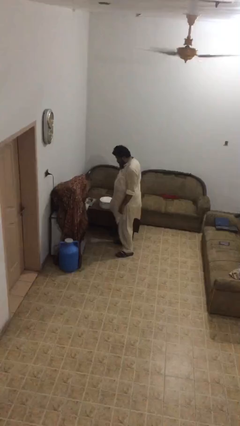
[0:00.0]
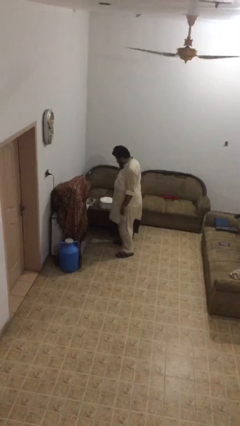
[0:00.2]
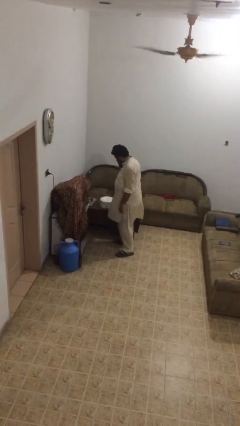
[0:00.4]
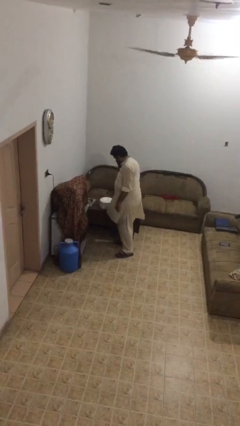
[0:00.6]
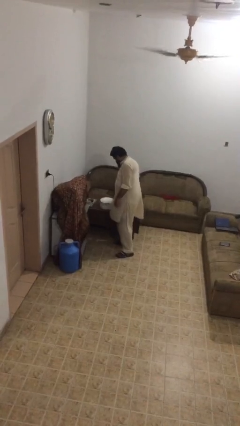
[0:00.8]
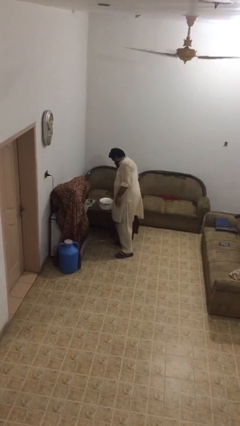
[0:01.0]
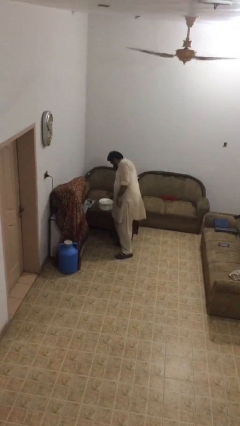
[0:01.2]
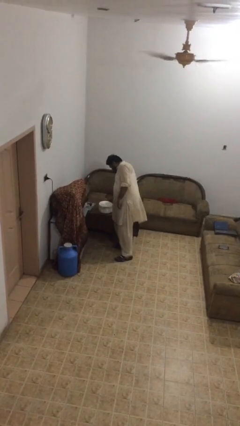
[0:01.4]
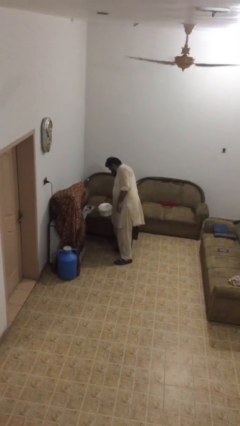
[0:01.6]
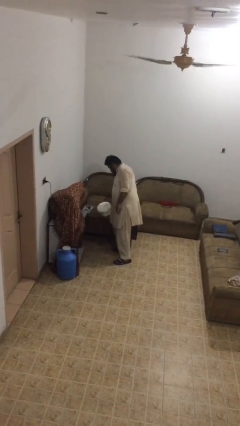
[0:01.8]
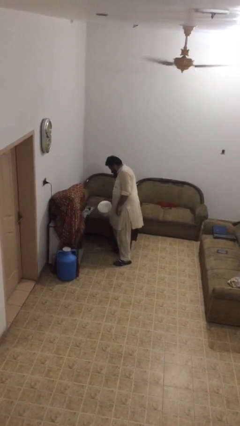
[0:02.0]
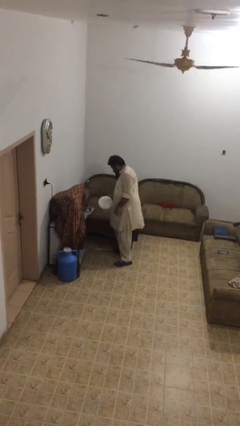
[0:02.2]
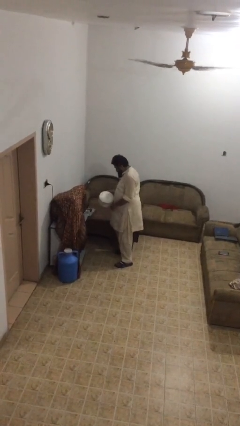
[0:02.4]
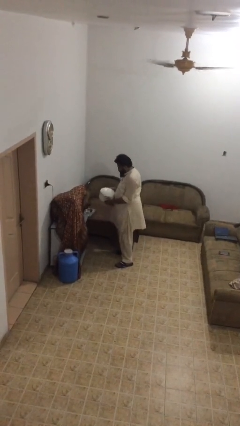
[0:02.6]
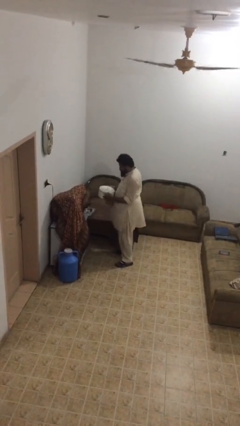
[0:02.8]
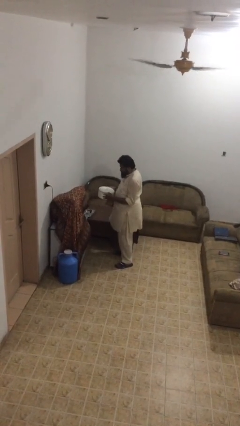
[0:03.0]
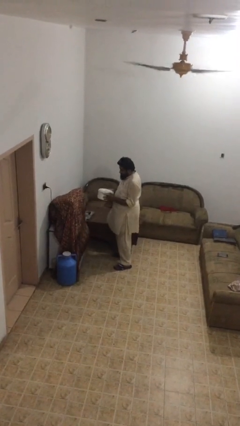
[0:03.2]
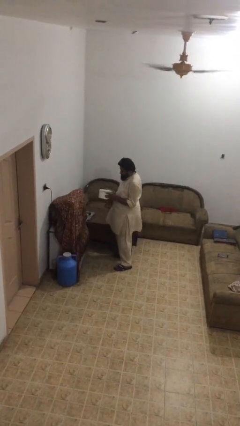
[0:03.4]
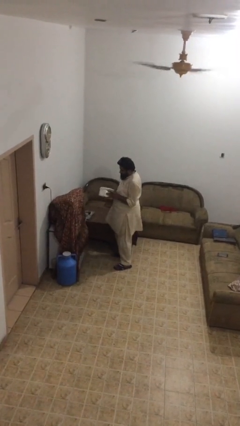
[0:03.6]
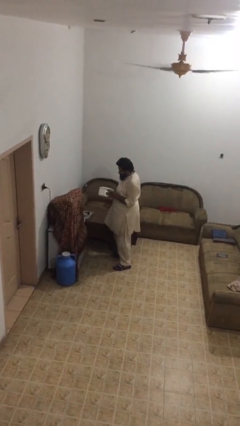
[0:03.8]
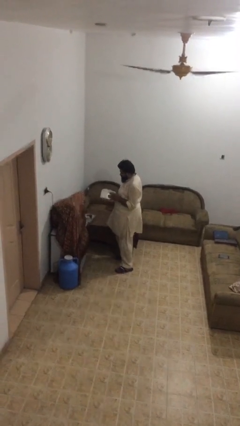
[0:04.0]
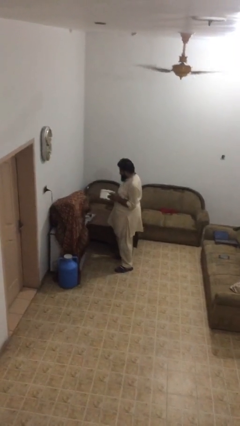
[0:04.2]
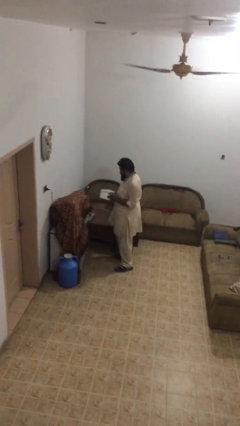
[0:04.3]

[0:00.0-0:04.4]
person picks up object from table

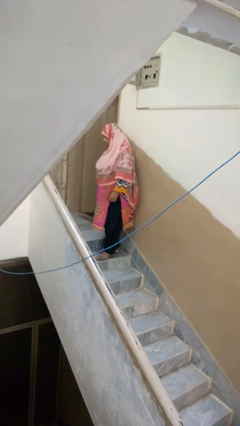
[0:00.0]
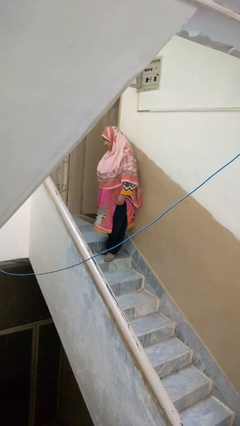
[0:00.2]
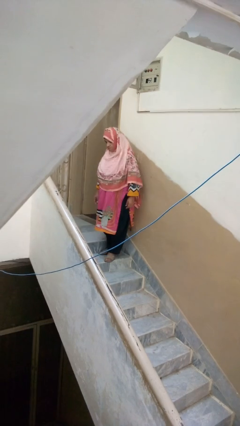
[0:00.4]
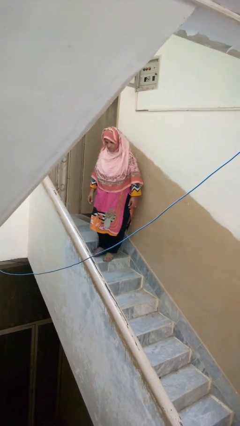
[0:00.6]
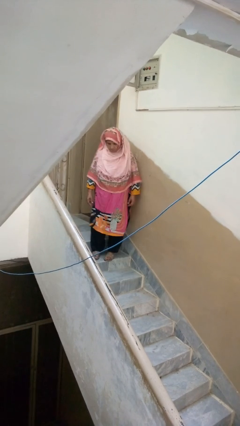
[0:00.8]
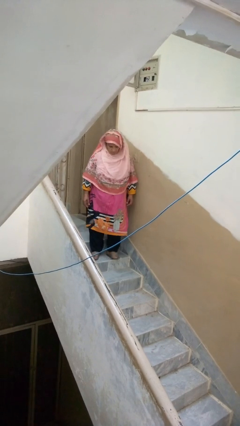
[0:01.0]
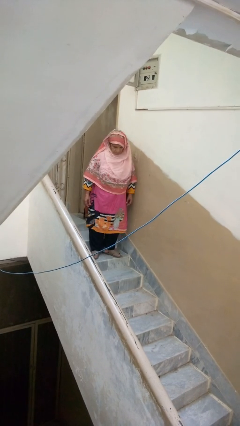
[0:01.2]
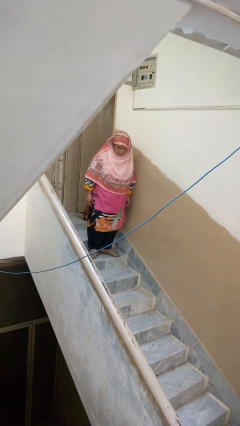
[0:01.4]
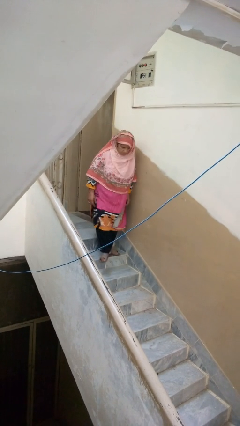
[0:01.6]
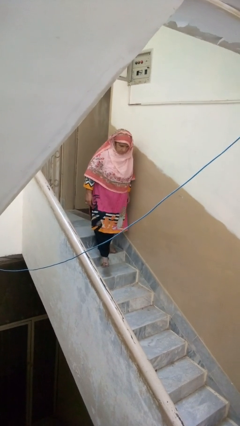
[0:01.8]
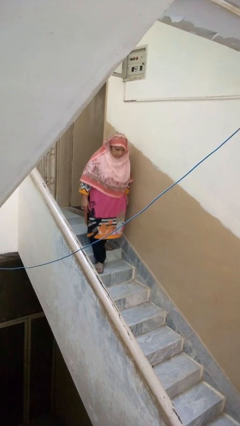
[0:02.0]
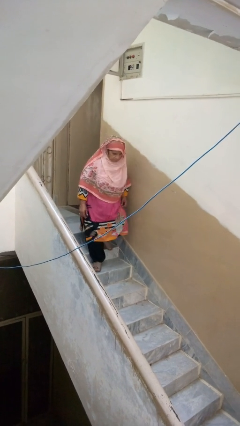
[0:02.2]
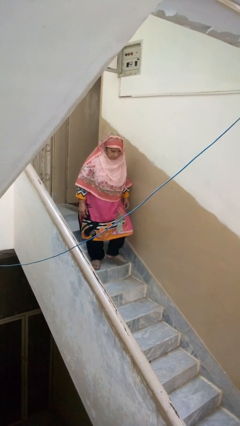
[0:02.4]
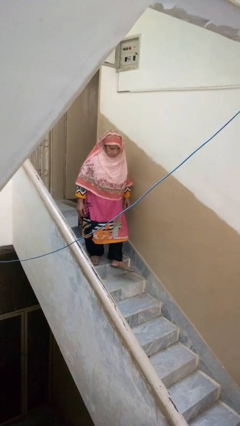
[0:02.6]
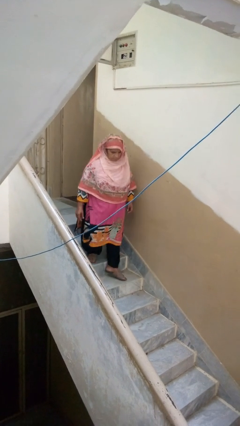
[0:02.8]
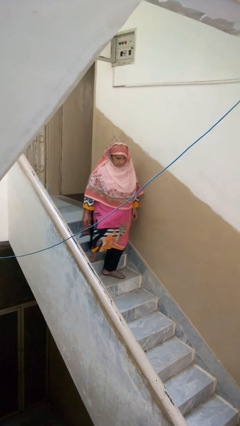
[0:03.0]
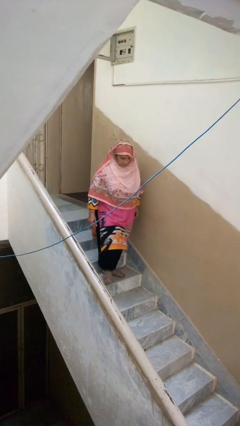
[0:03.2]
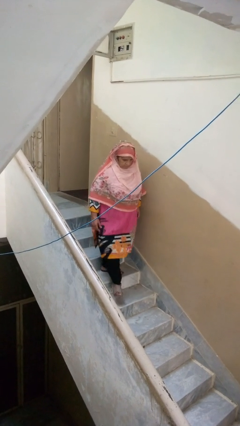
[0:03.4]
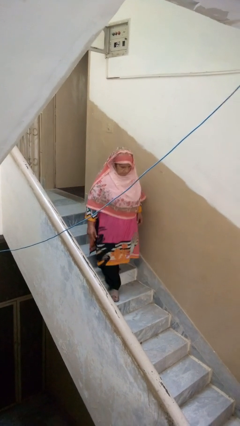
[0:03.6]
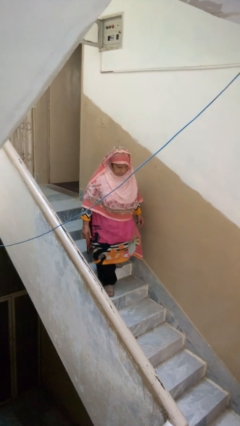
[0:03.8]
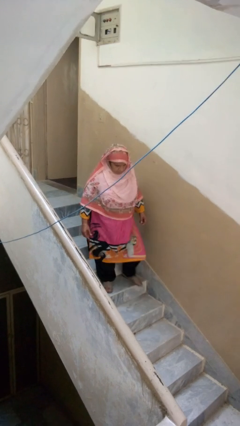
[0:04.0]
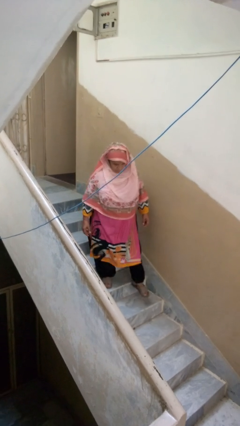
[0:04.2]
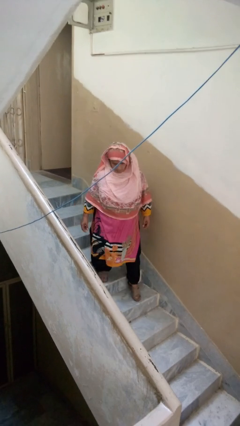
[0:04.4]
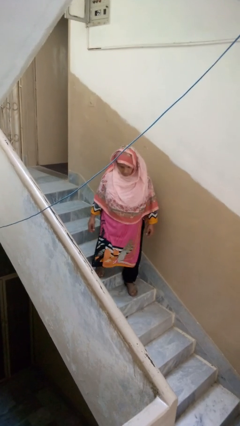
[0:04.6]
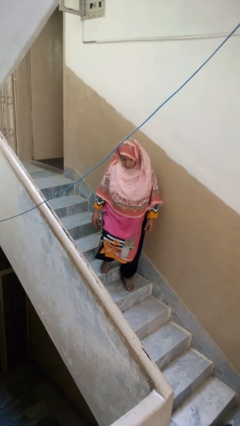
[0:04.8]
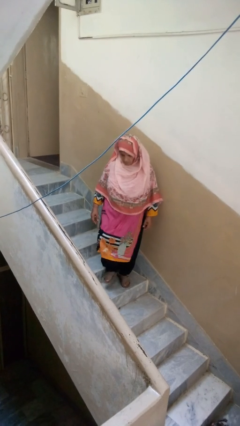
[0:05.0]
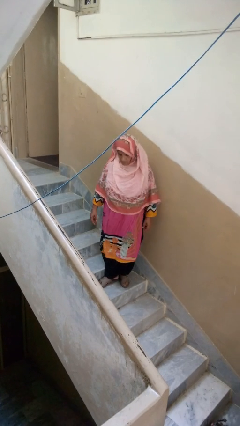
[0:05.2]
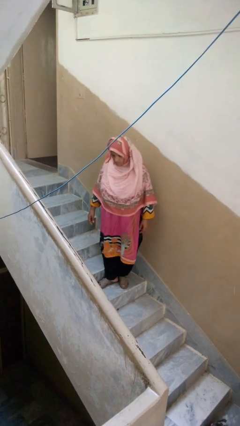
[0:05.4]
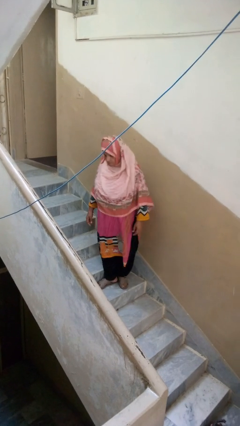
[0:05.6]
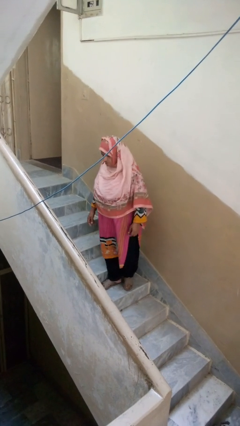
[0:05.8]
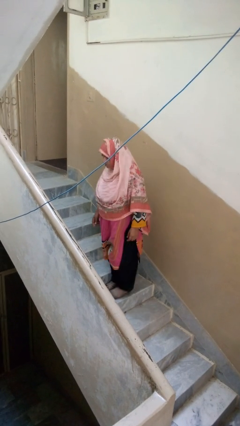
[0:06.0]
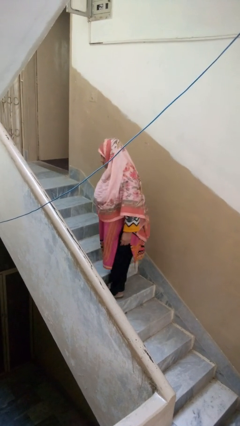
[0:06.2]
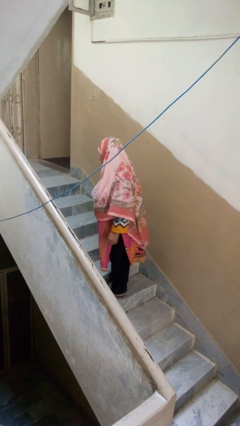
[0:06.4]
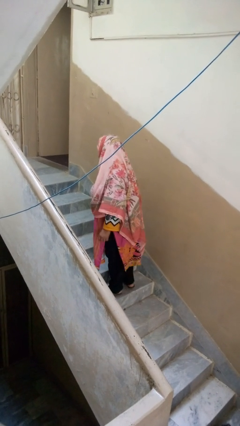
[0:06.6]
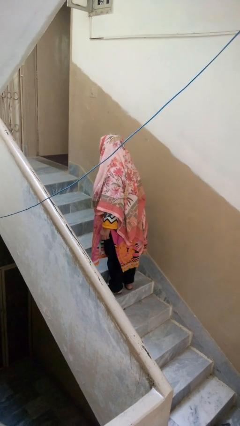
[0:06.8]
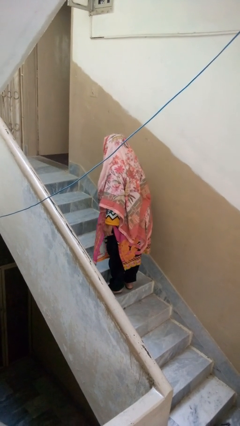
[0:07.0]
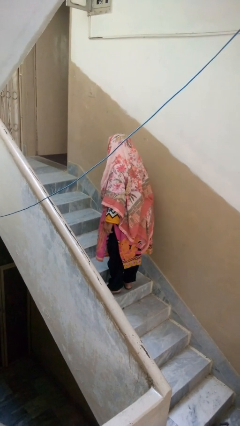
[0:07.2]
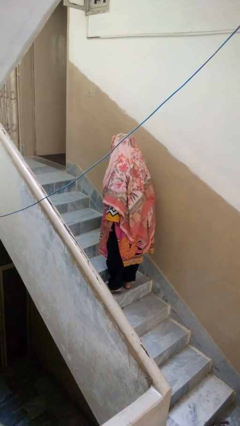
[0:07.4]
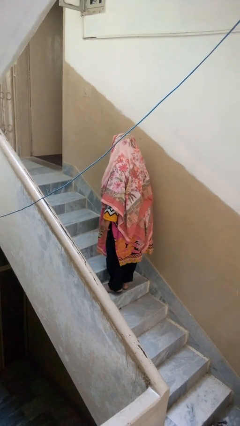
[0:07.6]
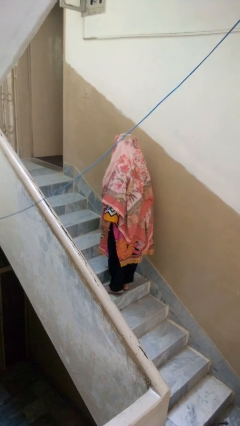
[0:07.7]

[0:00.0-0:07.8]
person climbs down stairs

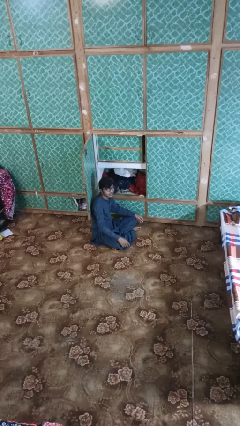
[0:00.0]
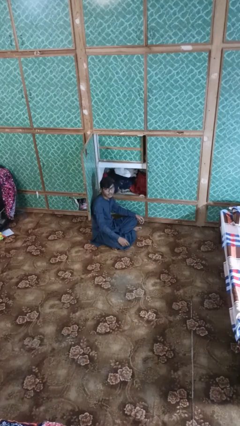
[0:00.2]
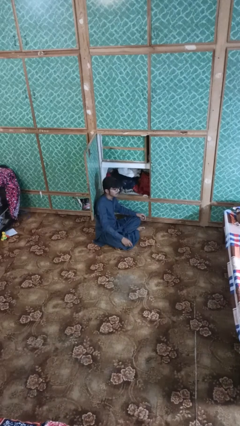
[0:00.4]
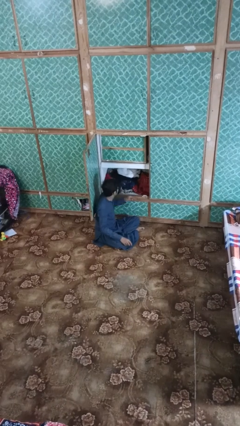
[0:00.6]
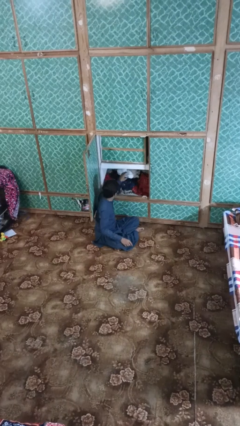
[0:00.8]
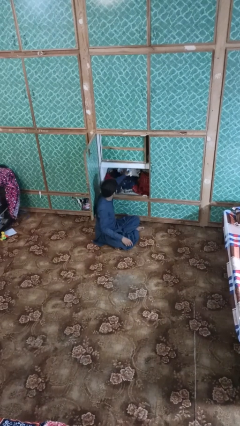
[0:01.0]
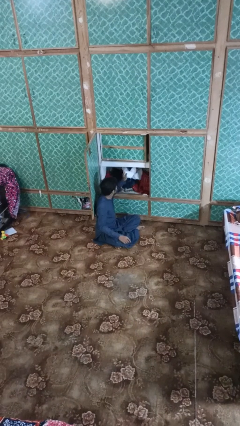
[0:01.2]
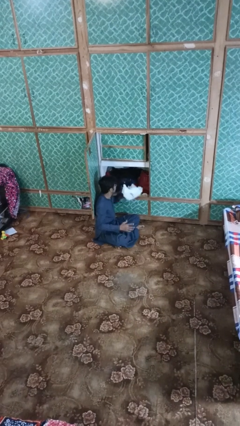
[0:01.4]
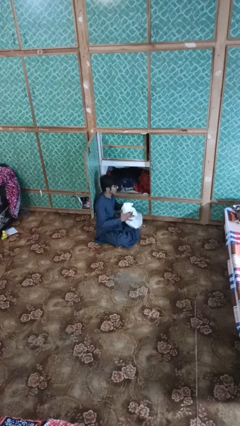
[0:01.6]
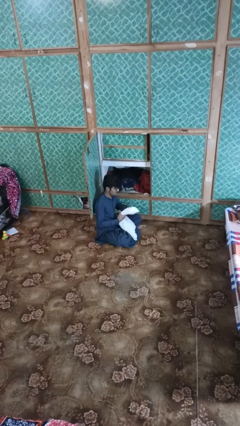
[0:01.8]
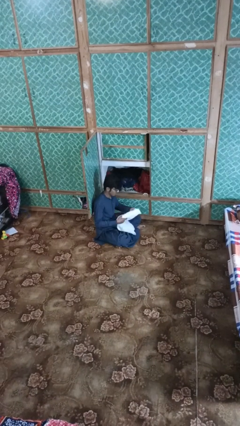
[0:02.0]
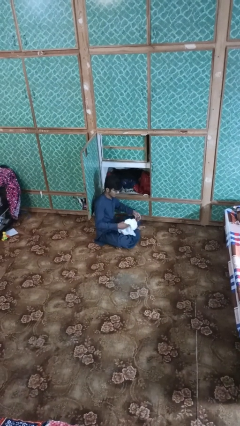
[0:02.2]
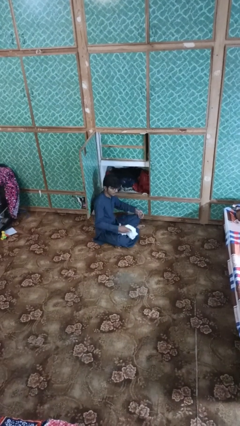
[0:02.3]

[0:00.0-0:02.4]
person takes clothes from dresser

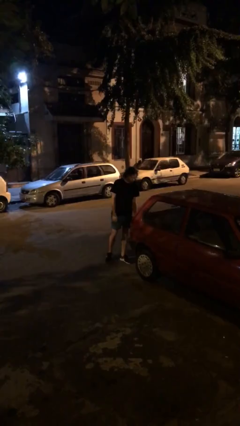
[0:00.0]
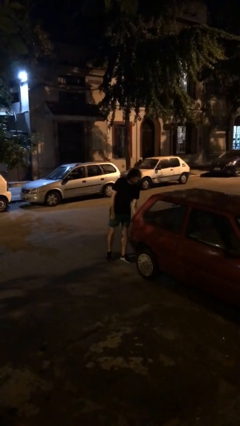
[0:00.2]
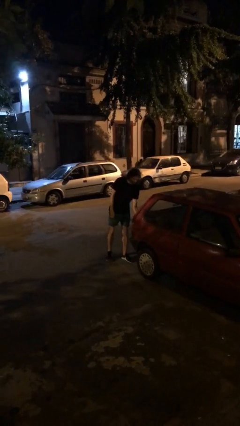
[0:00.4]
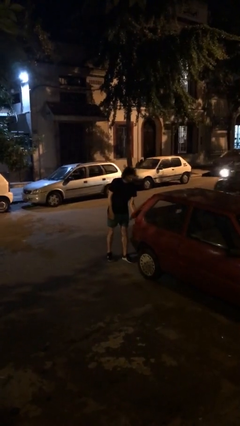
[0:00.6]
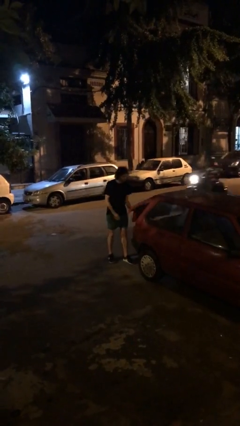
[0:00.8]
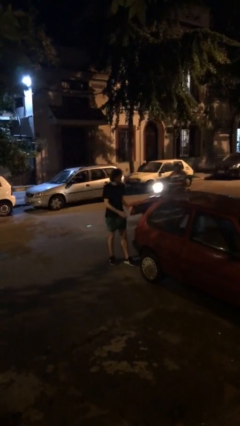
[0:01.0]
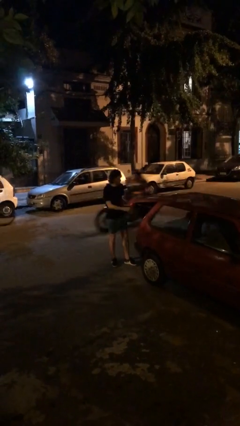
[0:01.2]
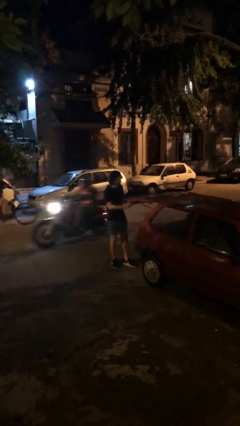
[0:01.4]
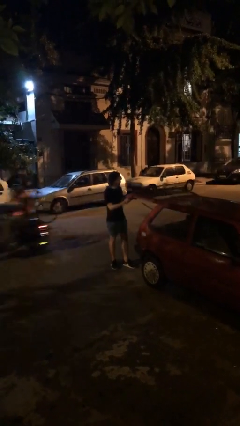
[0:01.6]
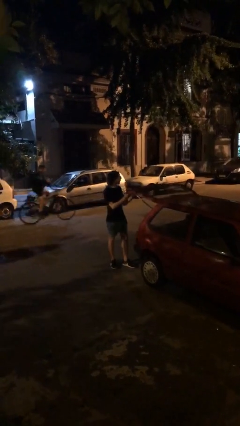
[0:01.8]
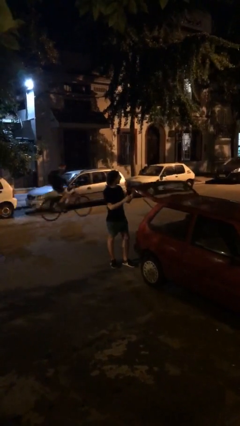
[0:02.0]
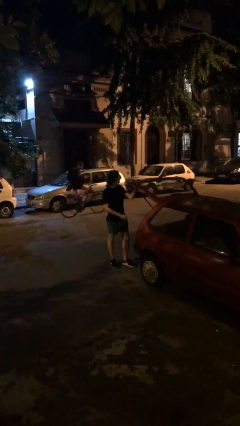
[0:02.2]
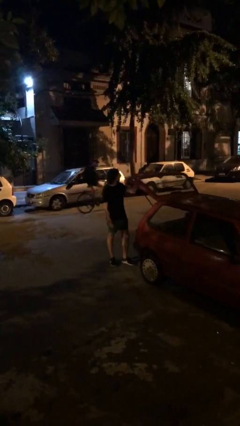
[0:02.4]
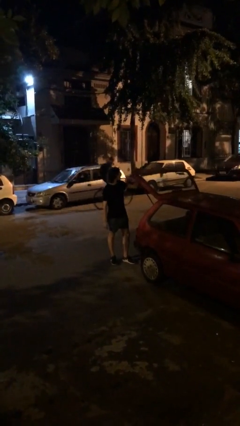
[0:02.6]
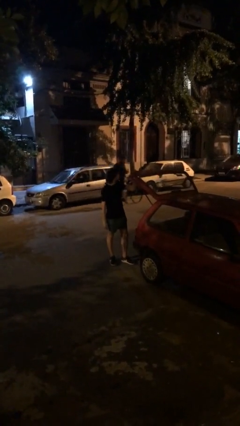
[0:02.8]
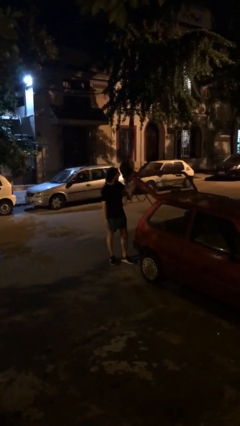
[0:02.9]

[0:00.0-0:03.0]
person opens car trunk
